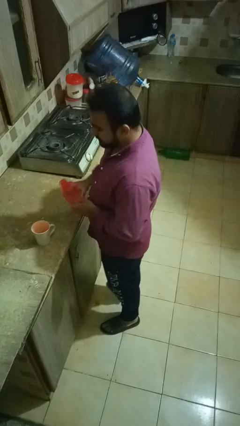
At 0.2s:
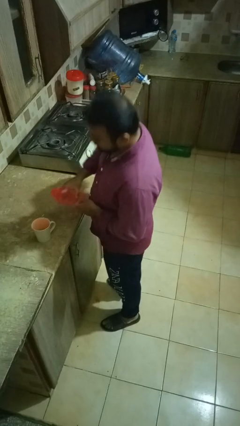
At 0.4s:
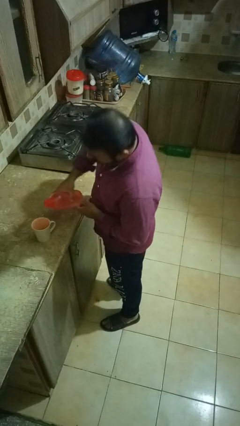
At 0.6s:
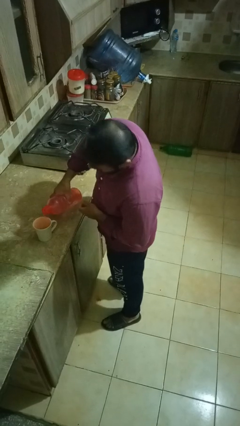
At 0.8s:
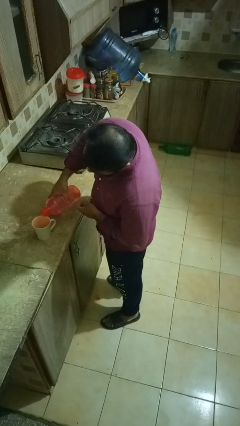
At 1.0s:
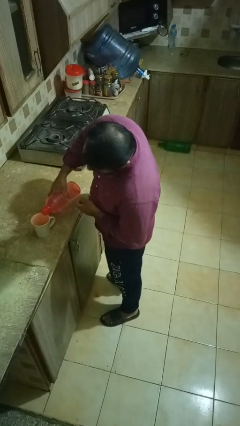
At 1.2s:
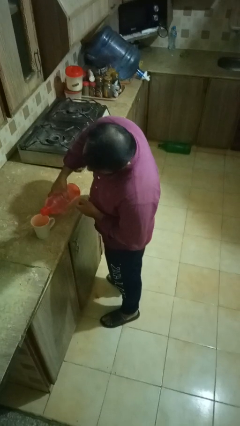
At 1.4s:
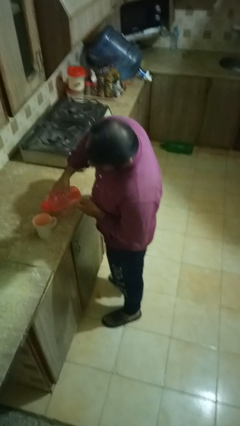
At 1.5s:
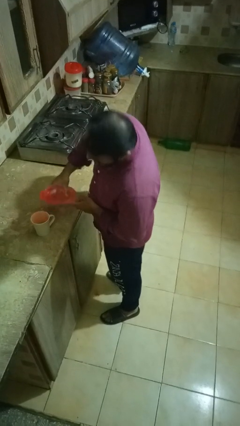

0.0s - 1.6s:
person pours liquid into cup

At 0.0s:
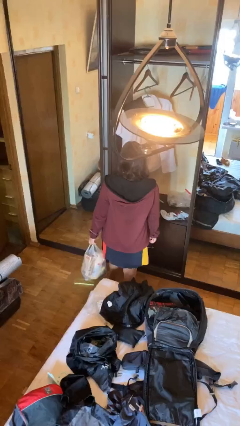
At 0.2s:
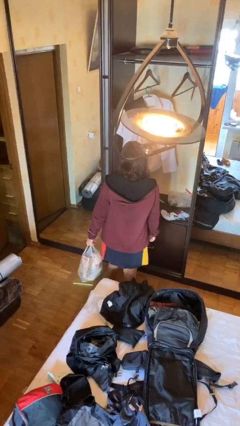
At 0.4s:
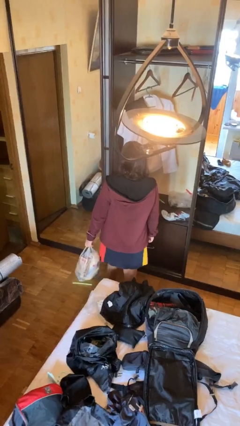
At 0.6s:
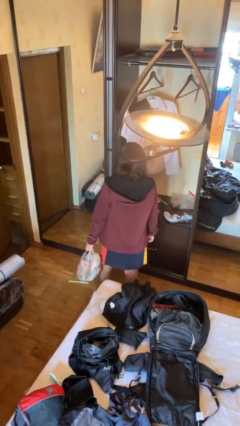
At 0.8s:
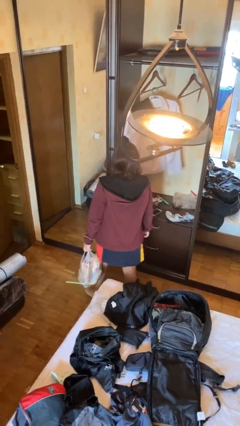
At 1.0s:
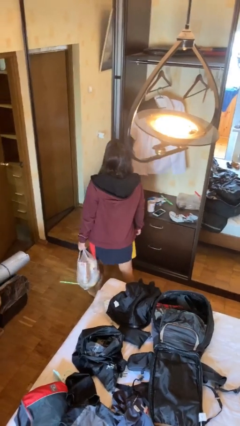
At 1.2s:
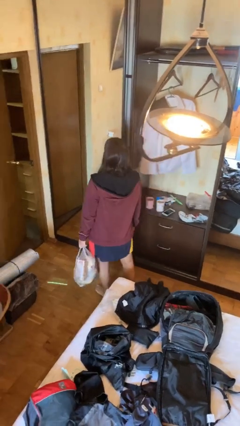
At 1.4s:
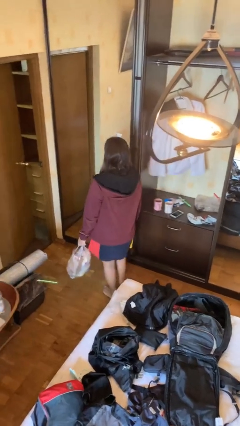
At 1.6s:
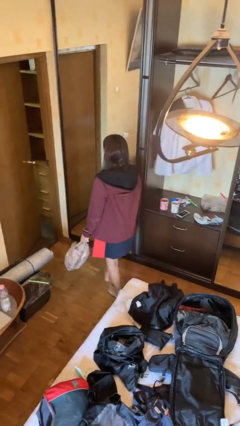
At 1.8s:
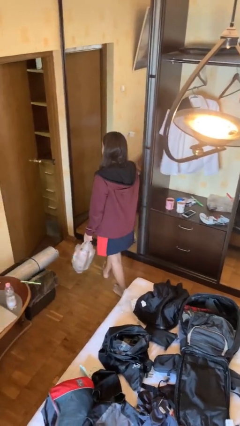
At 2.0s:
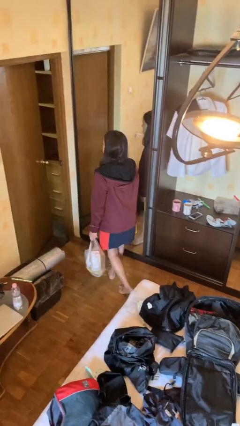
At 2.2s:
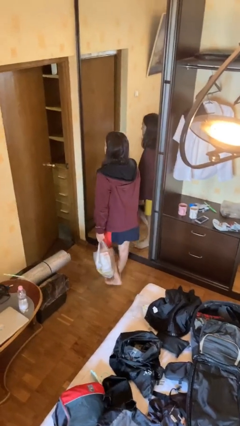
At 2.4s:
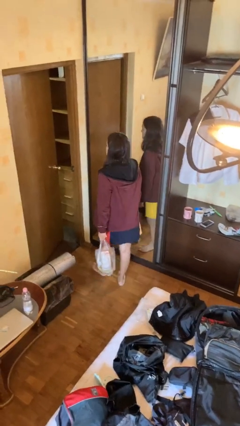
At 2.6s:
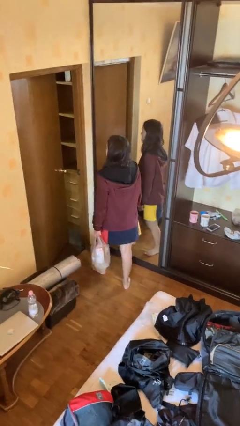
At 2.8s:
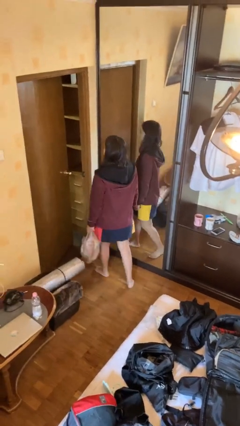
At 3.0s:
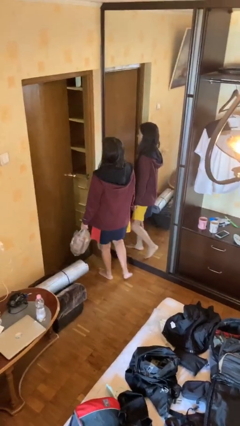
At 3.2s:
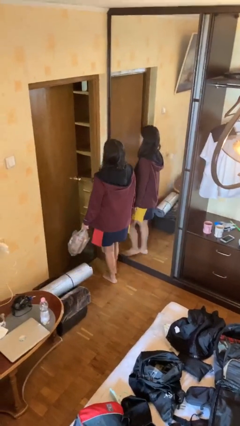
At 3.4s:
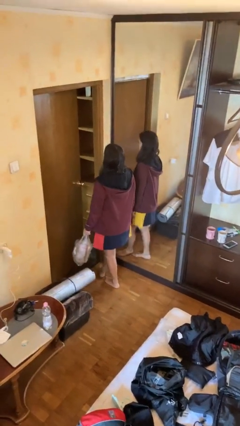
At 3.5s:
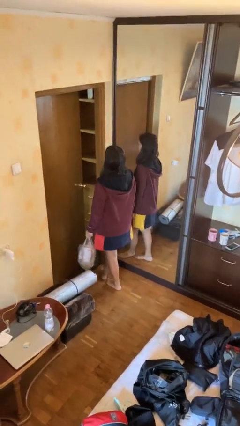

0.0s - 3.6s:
person carries groceries

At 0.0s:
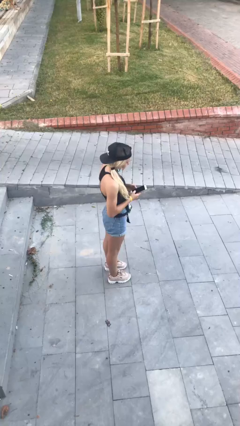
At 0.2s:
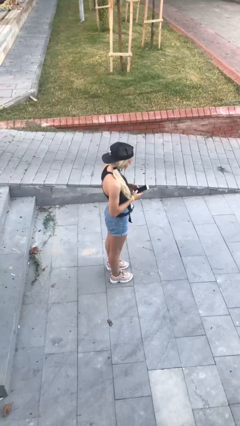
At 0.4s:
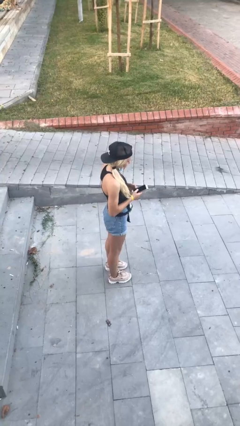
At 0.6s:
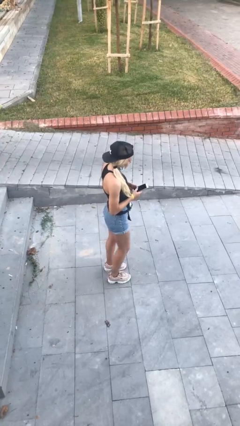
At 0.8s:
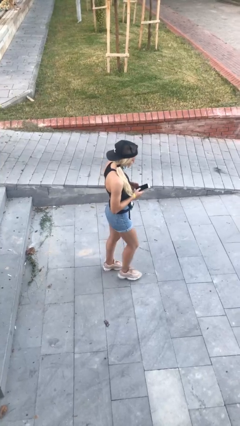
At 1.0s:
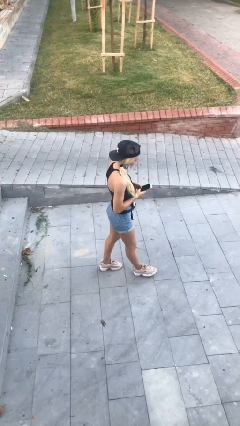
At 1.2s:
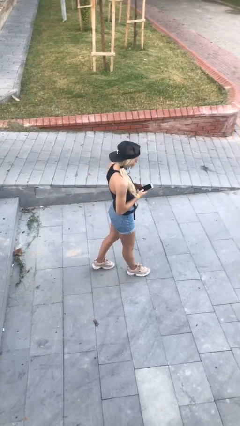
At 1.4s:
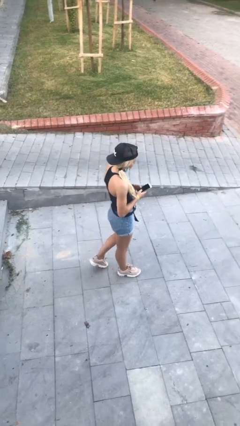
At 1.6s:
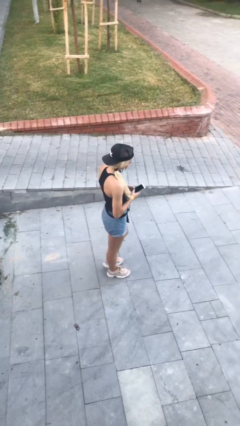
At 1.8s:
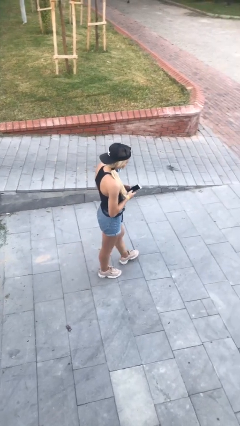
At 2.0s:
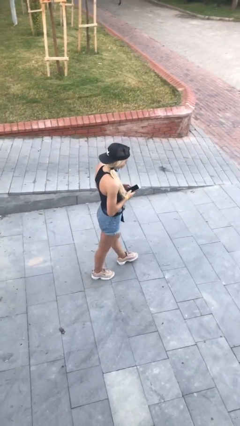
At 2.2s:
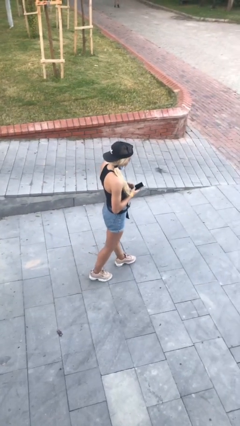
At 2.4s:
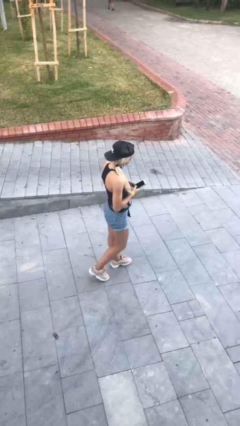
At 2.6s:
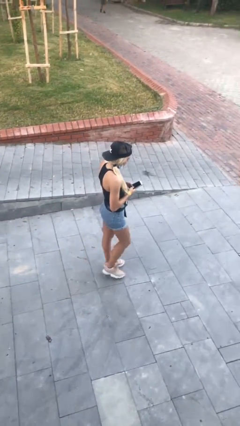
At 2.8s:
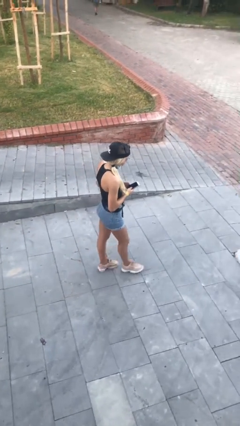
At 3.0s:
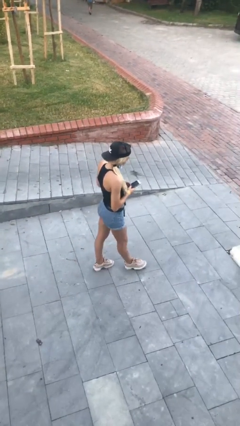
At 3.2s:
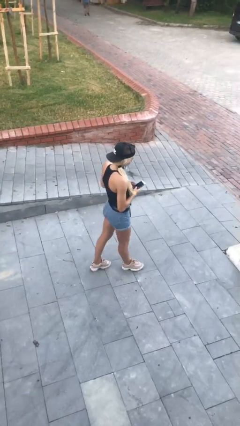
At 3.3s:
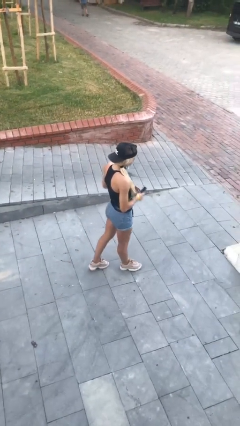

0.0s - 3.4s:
person texts on phone

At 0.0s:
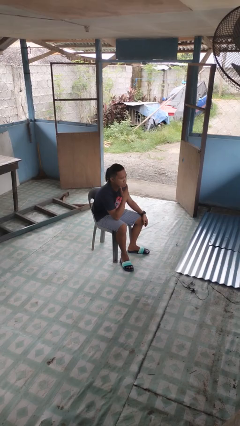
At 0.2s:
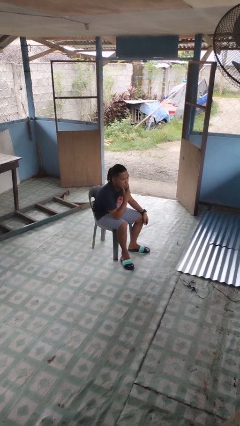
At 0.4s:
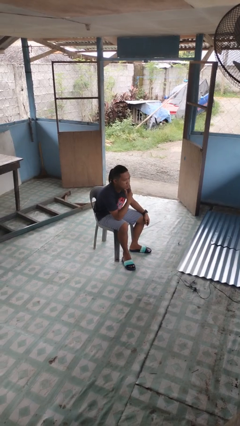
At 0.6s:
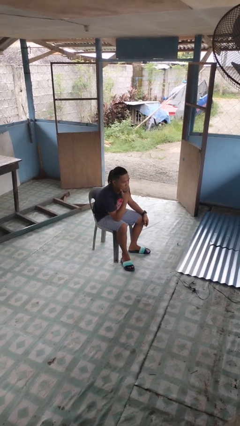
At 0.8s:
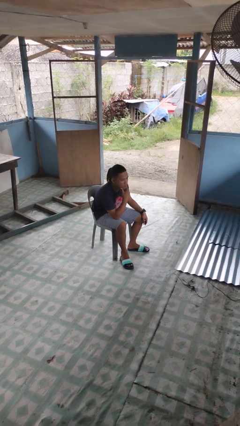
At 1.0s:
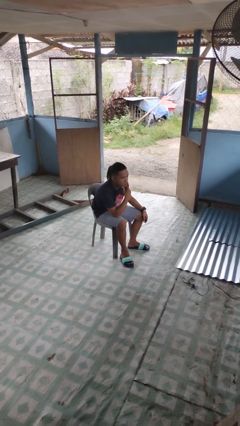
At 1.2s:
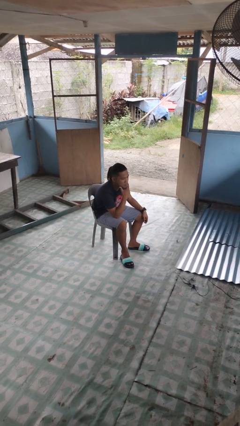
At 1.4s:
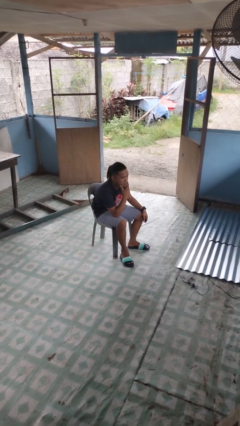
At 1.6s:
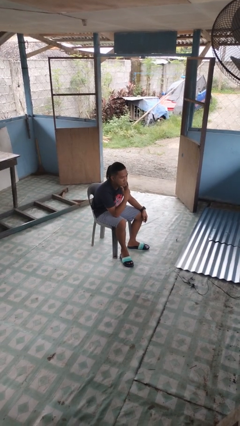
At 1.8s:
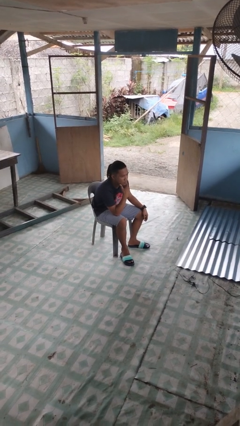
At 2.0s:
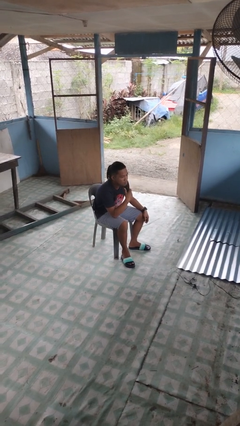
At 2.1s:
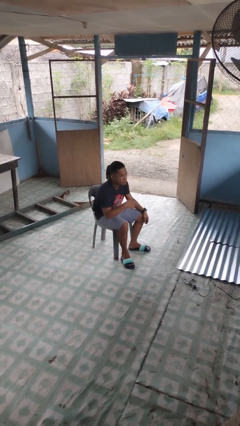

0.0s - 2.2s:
person strokes chin

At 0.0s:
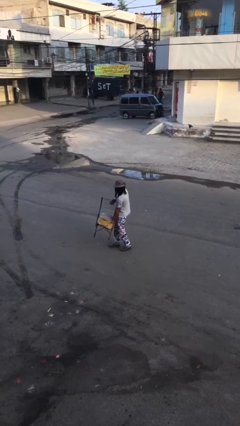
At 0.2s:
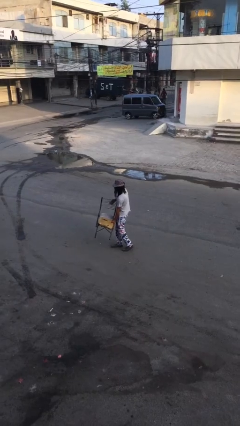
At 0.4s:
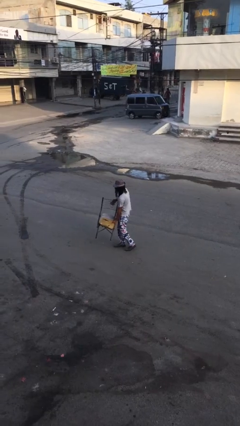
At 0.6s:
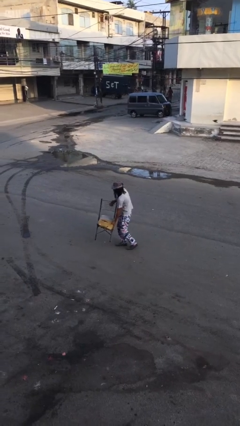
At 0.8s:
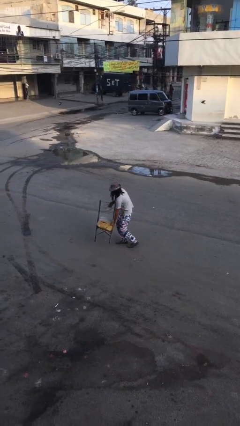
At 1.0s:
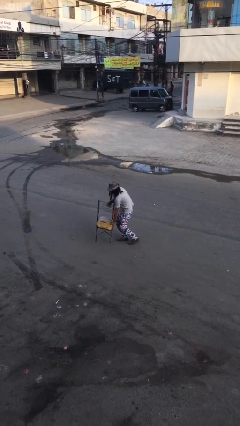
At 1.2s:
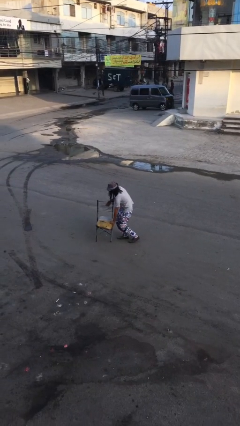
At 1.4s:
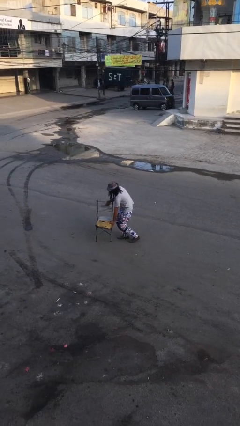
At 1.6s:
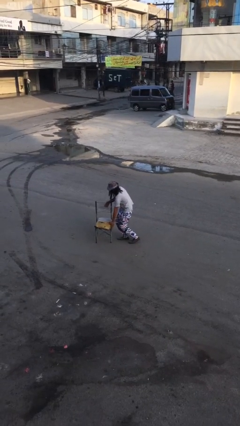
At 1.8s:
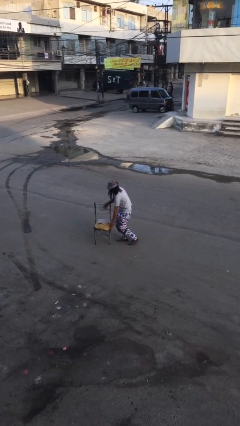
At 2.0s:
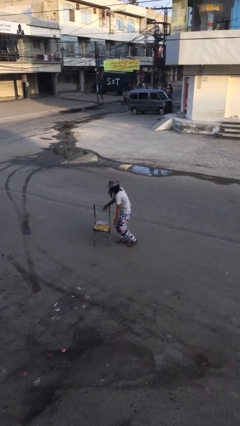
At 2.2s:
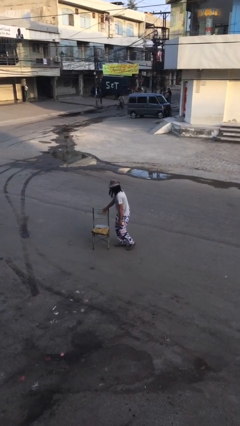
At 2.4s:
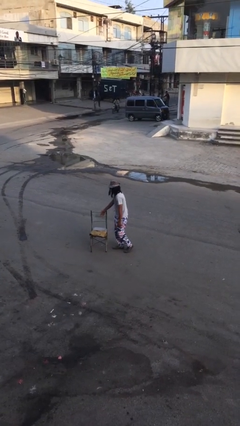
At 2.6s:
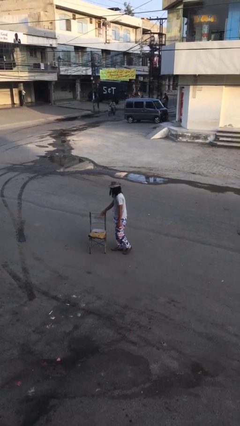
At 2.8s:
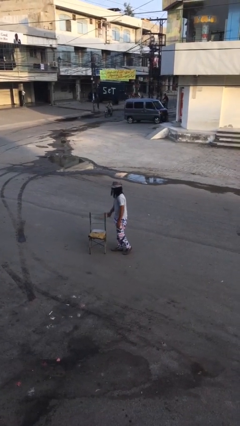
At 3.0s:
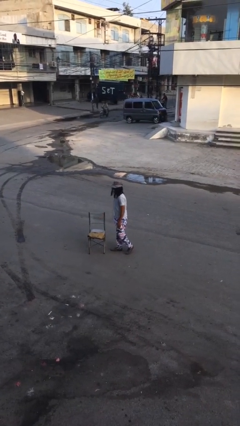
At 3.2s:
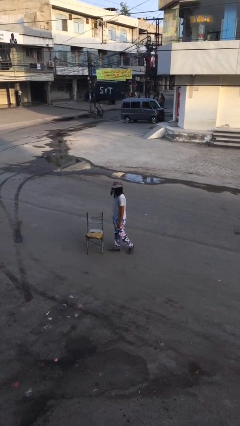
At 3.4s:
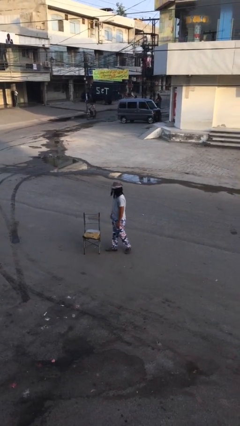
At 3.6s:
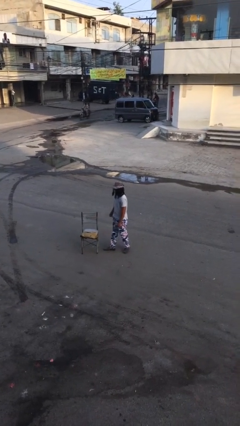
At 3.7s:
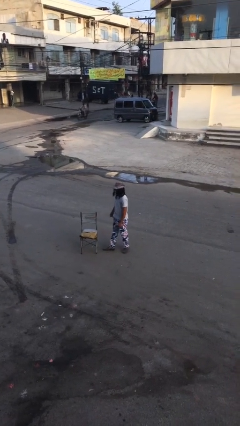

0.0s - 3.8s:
person puts down object on floor

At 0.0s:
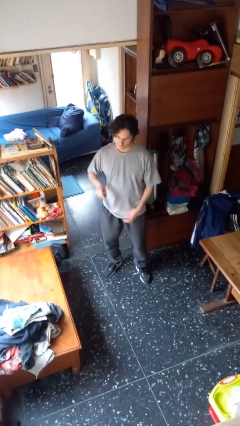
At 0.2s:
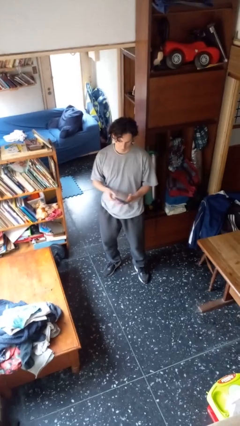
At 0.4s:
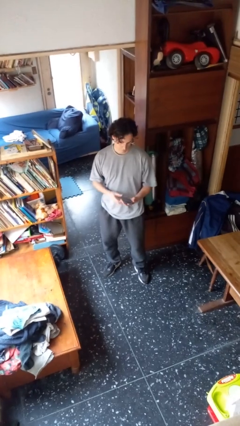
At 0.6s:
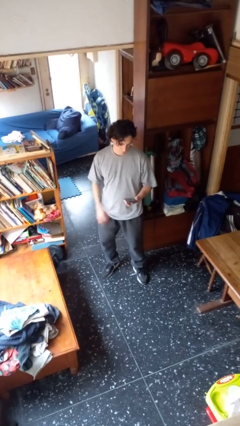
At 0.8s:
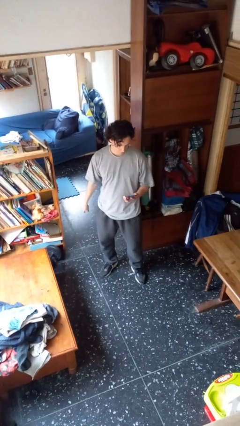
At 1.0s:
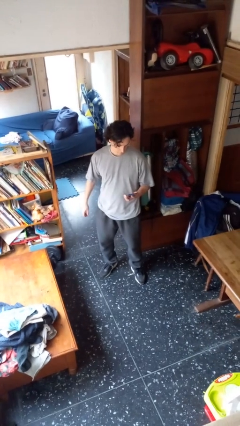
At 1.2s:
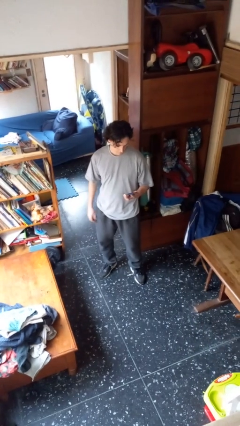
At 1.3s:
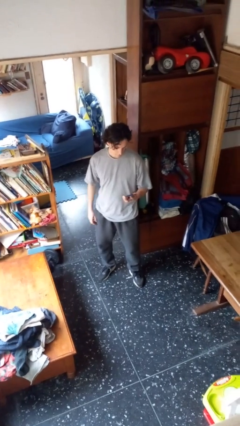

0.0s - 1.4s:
person takes phone from pocket

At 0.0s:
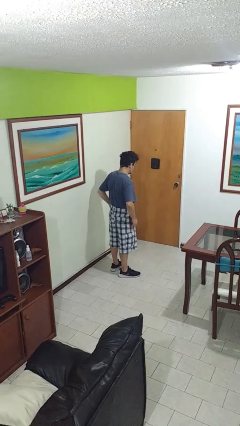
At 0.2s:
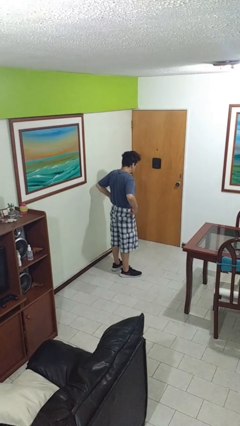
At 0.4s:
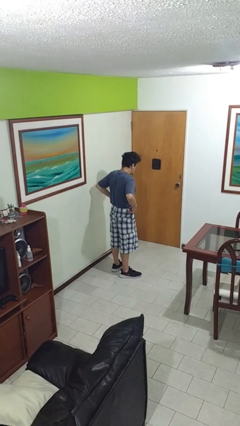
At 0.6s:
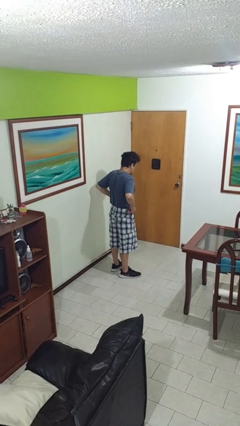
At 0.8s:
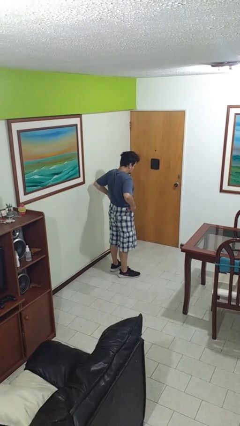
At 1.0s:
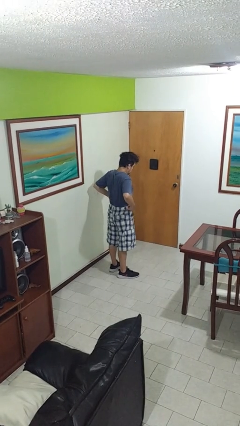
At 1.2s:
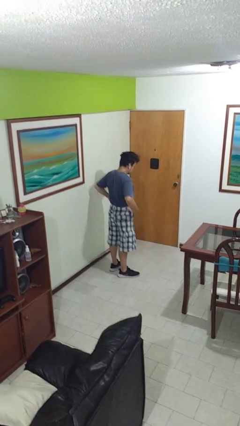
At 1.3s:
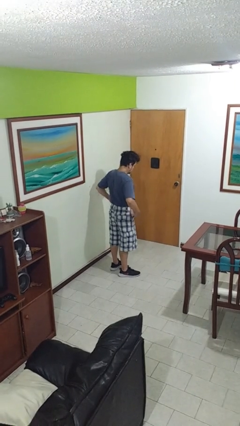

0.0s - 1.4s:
person hikes up pants
